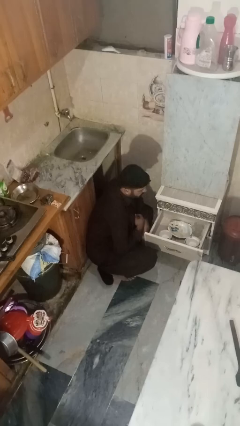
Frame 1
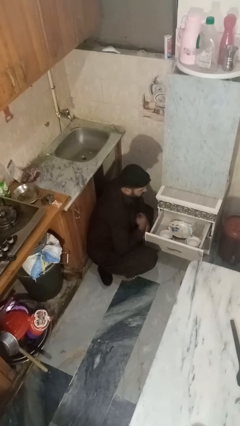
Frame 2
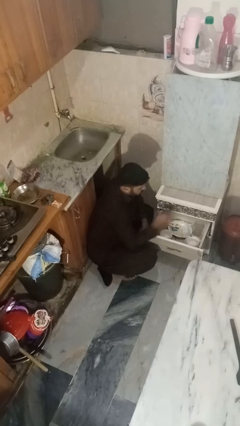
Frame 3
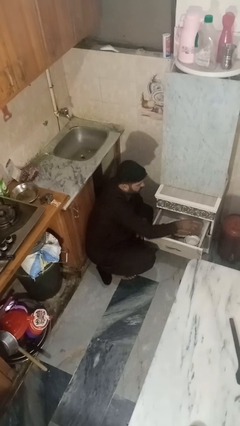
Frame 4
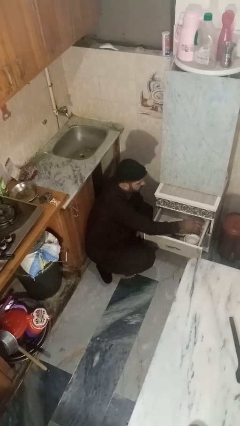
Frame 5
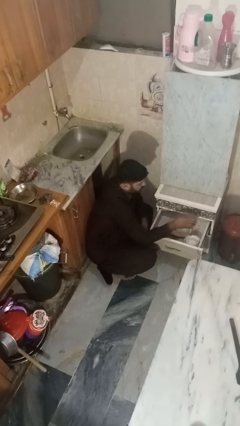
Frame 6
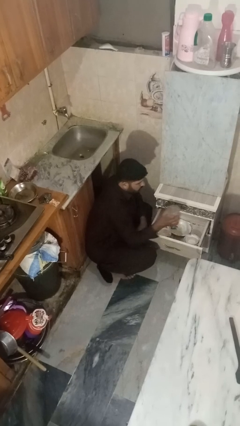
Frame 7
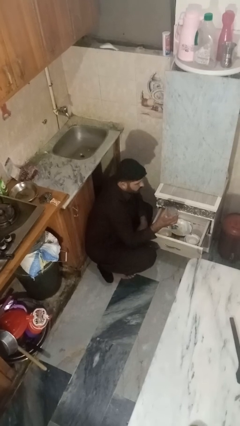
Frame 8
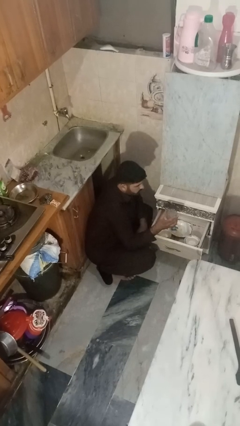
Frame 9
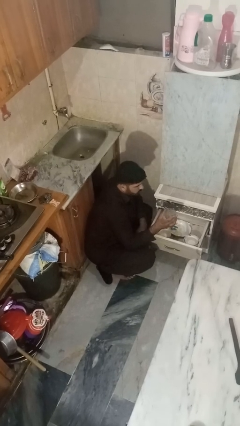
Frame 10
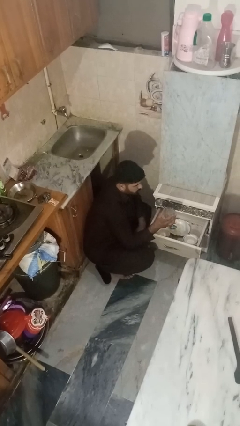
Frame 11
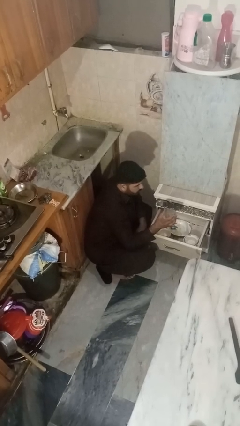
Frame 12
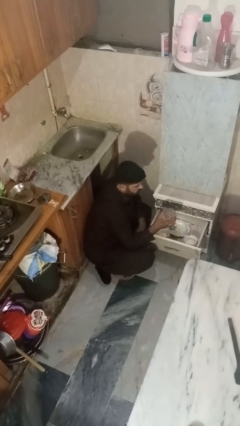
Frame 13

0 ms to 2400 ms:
person takes object from kitchen drawer

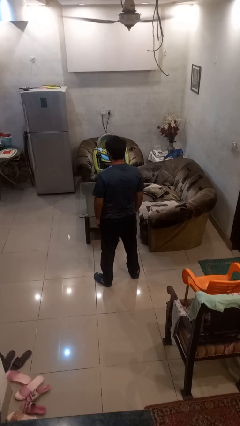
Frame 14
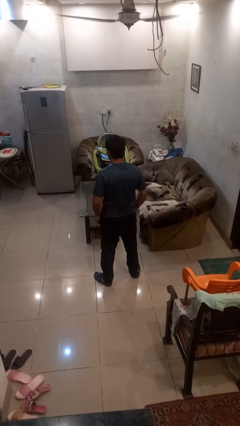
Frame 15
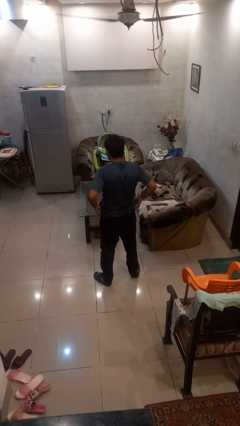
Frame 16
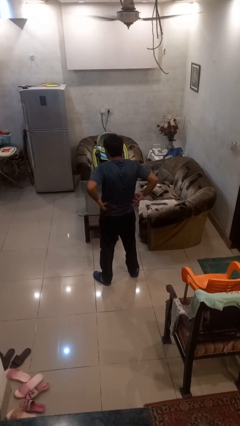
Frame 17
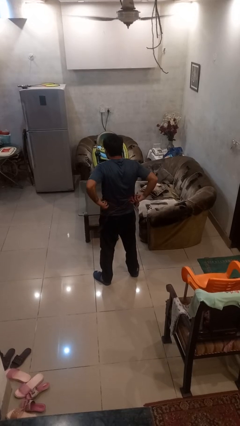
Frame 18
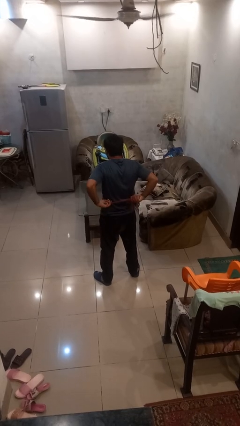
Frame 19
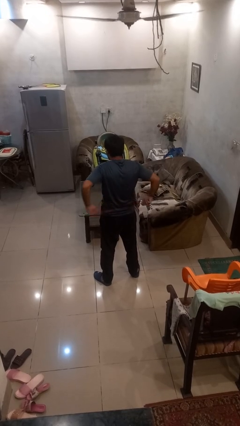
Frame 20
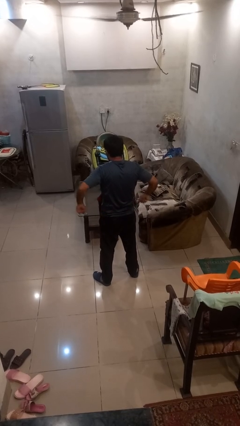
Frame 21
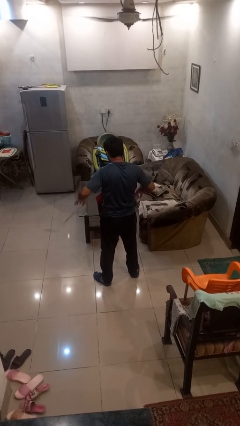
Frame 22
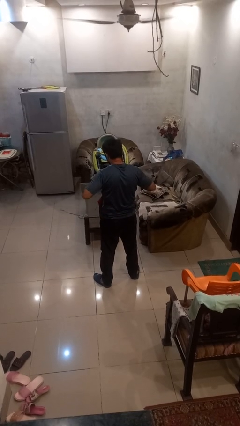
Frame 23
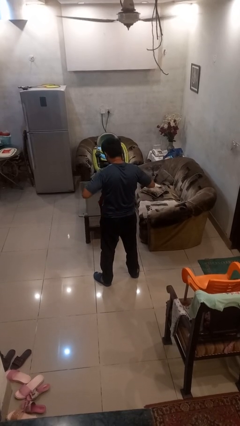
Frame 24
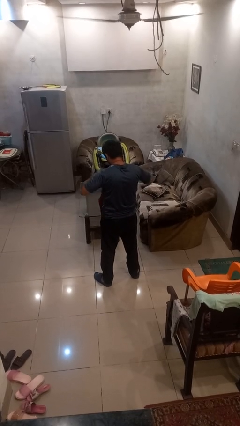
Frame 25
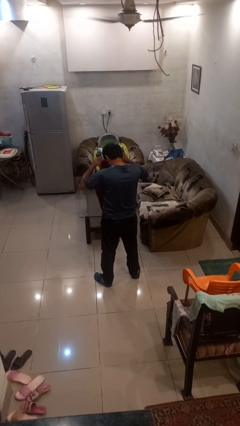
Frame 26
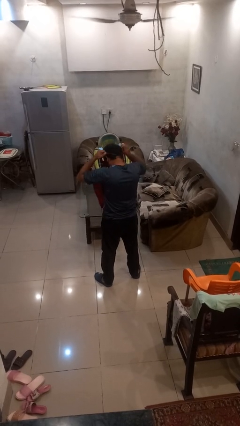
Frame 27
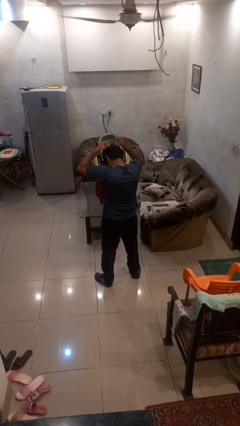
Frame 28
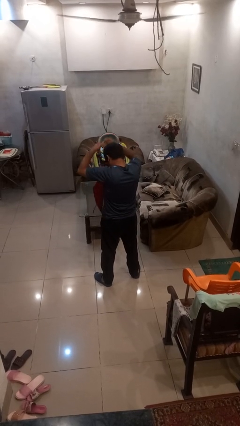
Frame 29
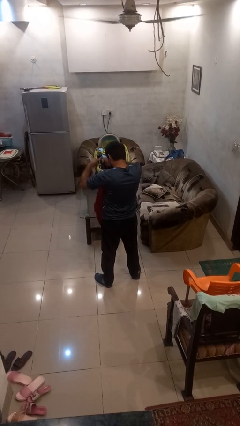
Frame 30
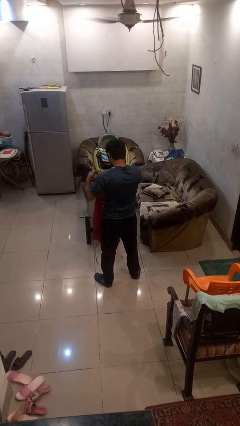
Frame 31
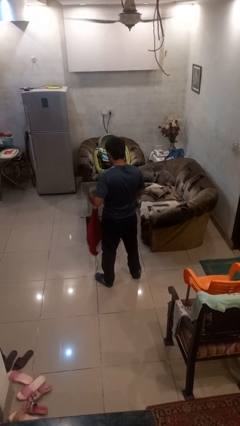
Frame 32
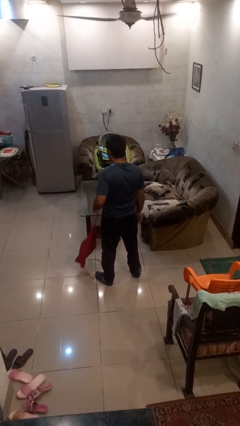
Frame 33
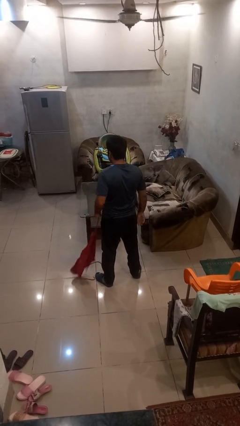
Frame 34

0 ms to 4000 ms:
person takes off apron

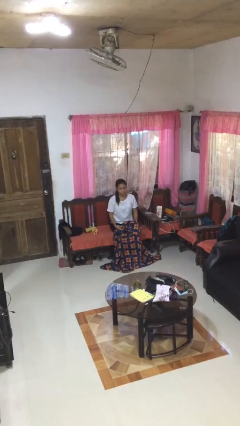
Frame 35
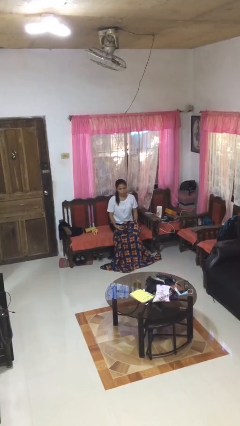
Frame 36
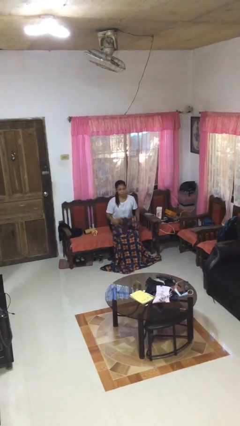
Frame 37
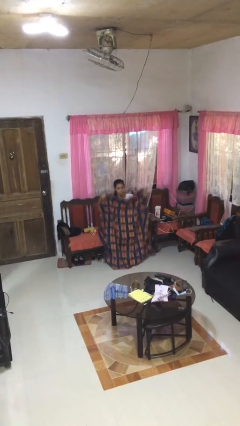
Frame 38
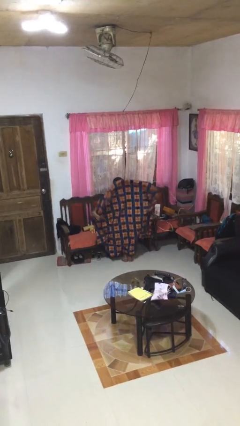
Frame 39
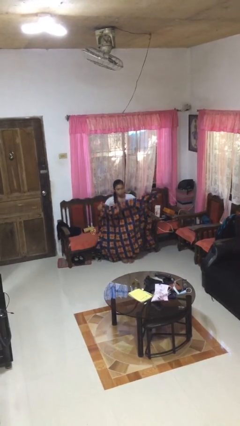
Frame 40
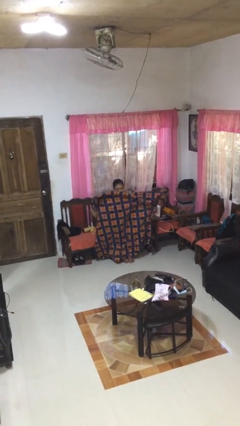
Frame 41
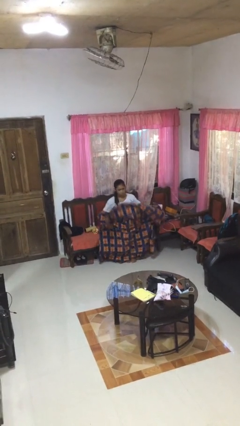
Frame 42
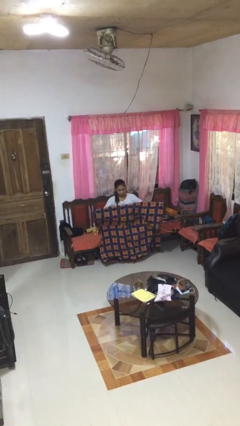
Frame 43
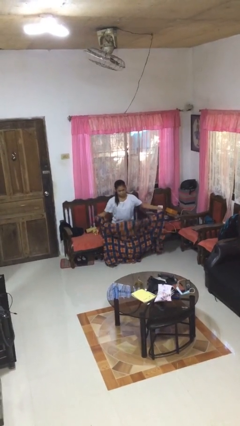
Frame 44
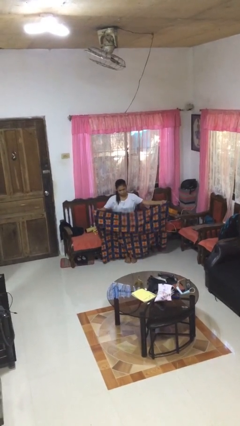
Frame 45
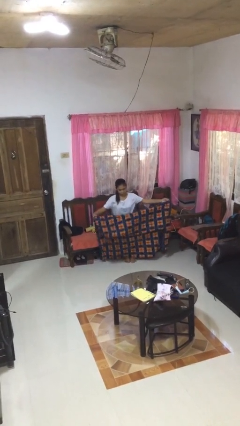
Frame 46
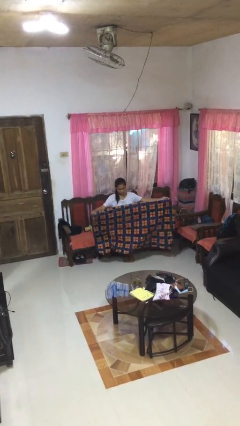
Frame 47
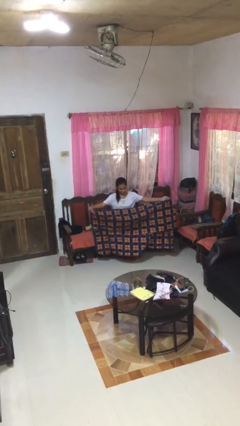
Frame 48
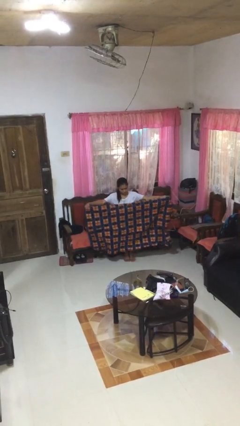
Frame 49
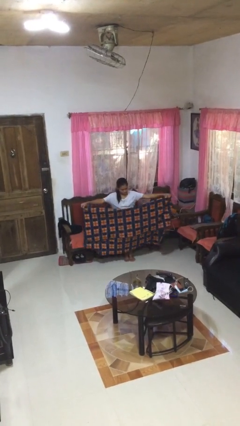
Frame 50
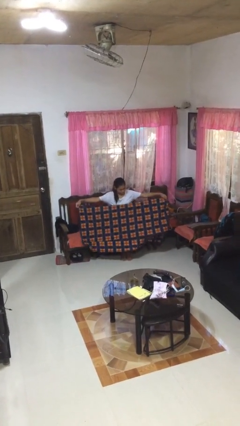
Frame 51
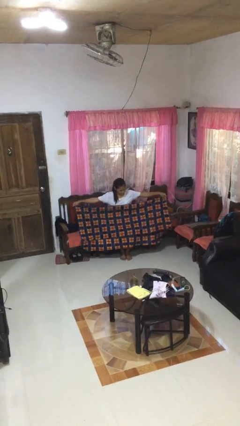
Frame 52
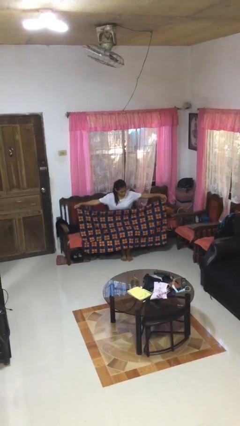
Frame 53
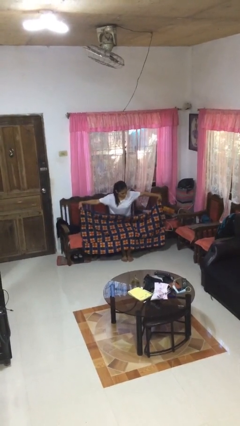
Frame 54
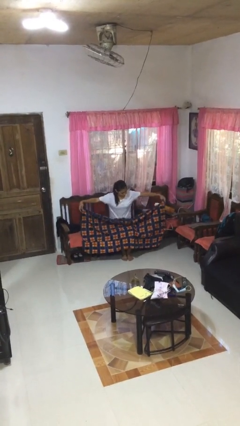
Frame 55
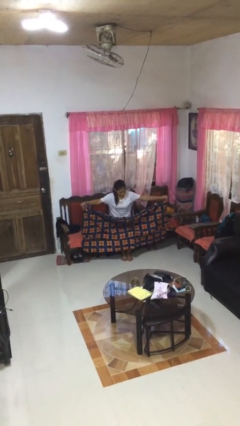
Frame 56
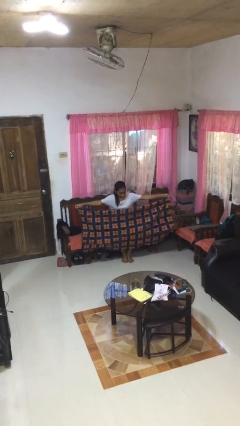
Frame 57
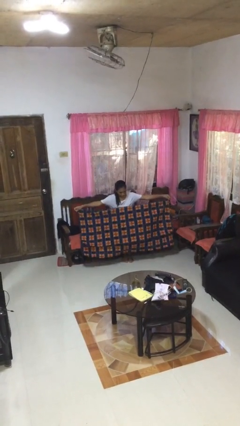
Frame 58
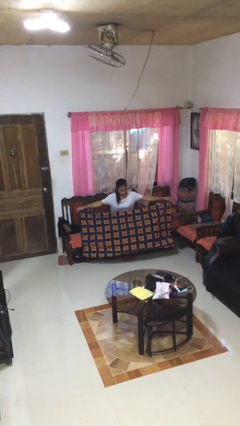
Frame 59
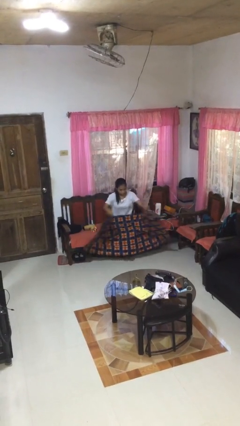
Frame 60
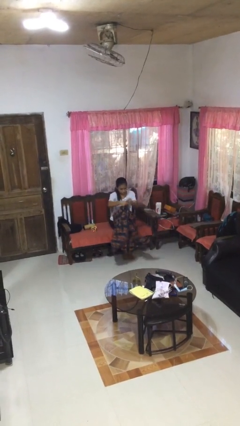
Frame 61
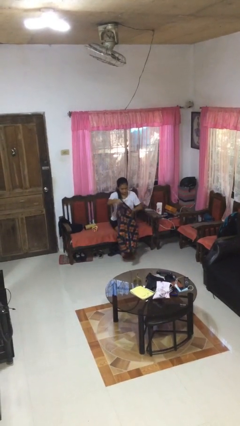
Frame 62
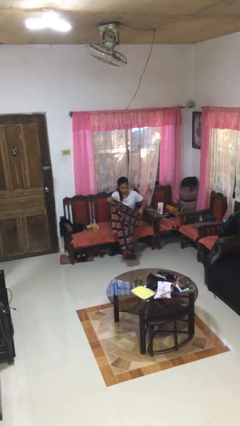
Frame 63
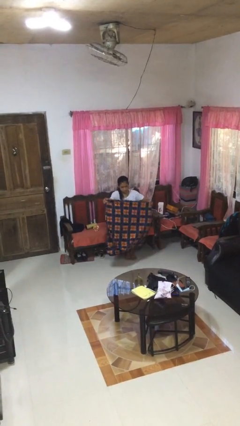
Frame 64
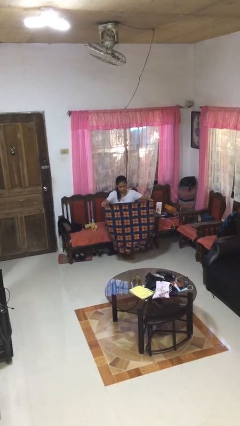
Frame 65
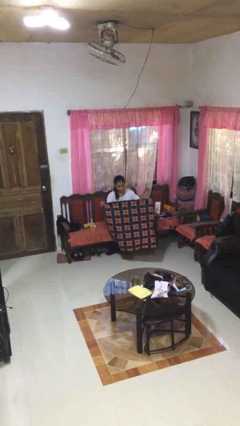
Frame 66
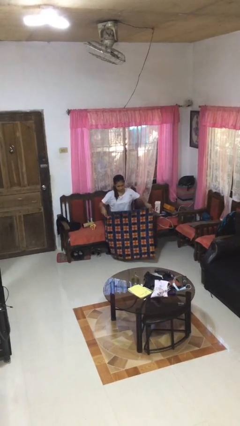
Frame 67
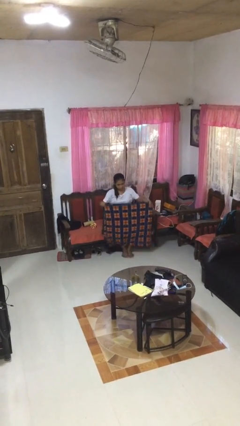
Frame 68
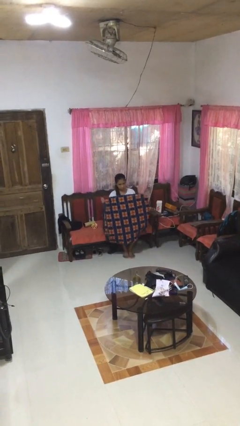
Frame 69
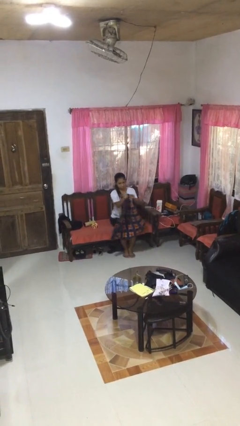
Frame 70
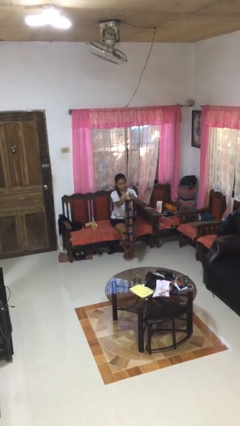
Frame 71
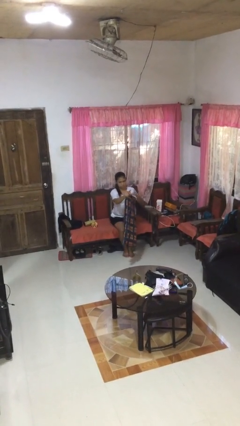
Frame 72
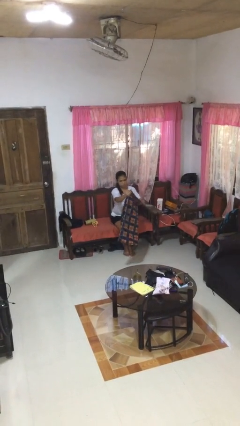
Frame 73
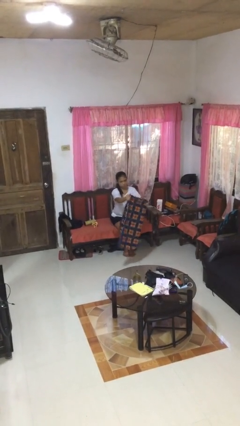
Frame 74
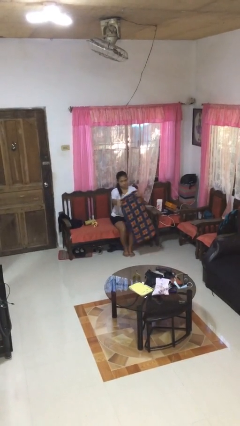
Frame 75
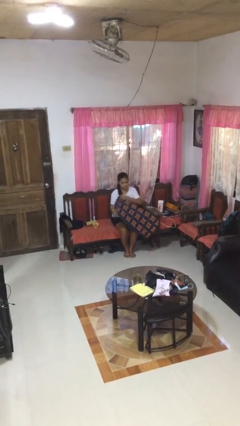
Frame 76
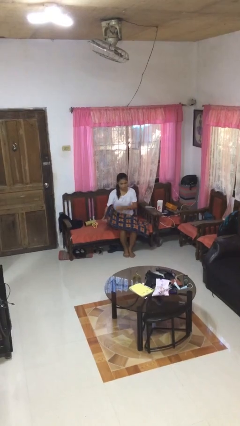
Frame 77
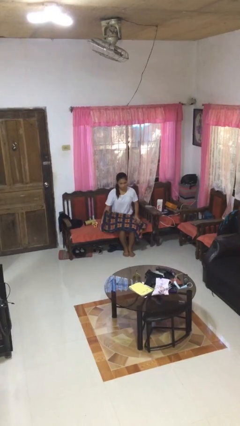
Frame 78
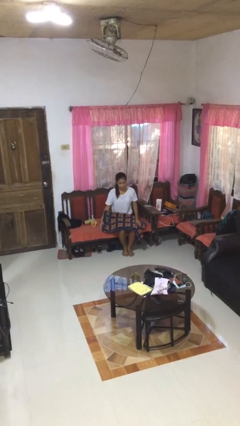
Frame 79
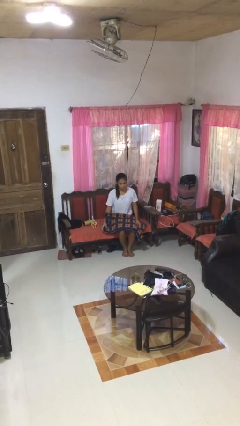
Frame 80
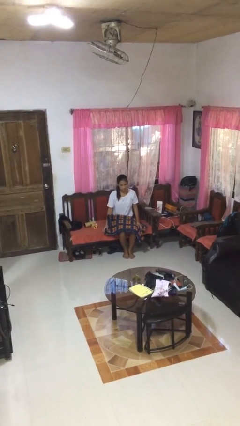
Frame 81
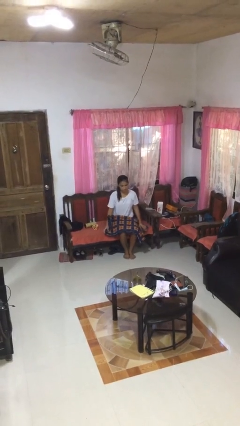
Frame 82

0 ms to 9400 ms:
person folds blanket

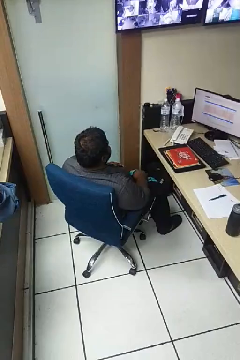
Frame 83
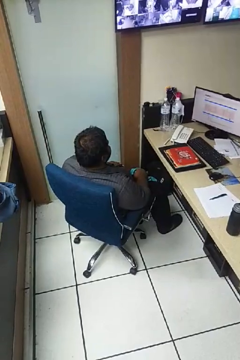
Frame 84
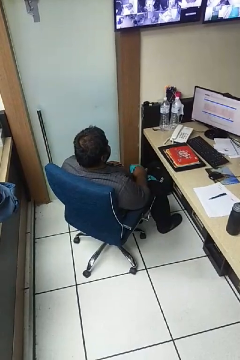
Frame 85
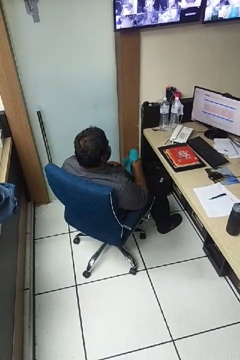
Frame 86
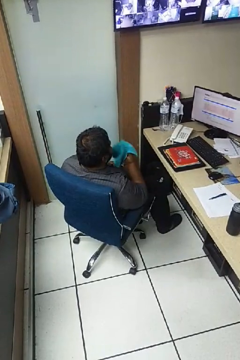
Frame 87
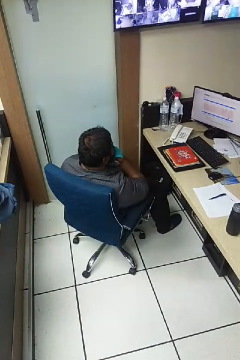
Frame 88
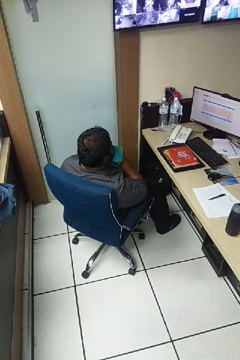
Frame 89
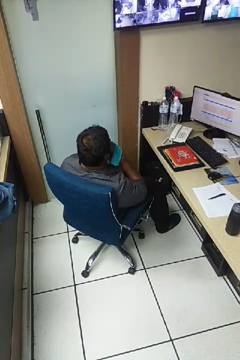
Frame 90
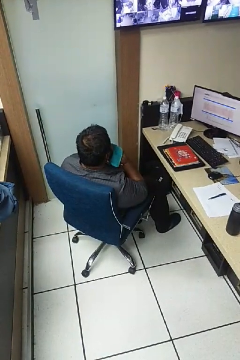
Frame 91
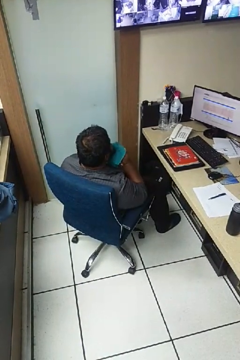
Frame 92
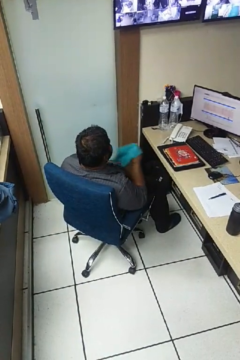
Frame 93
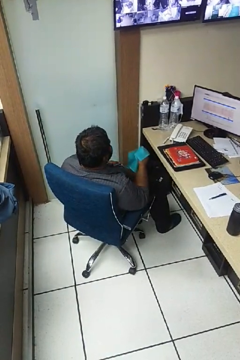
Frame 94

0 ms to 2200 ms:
person wipes mouth with napkin

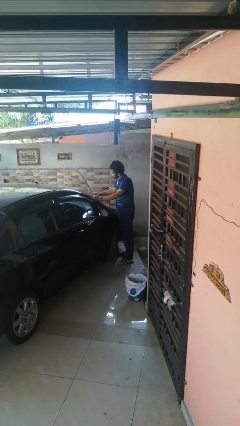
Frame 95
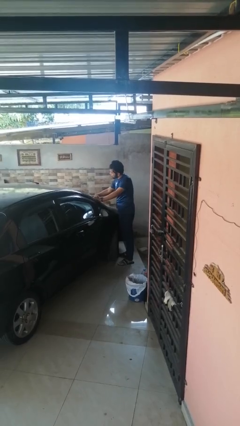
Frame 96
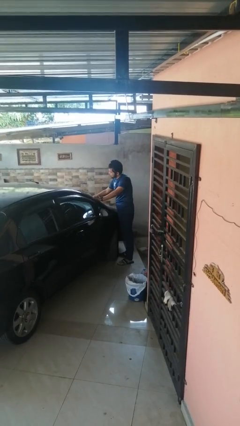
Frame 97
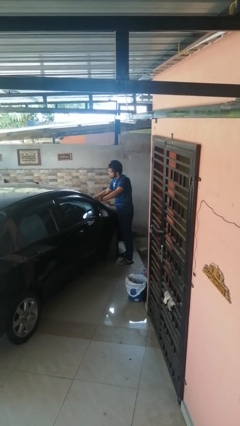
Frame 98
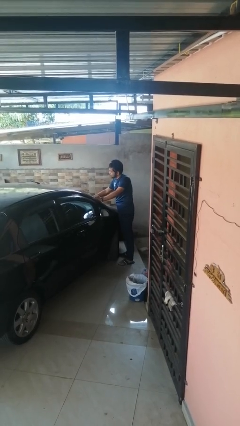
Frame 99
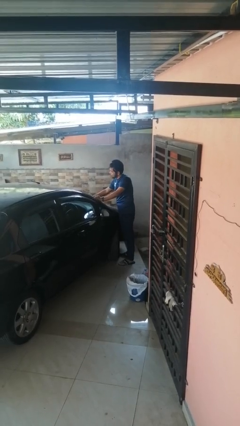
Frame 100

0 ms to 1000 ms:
person flips down car wipers
